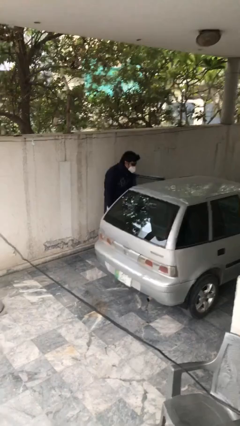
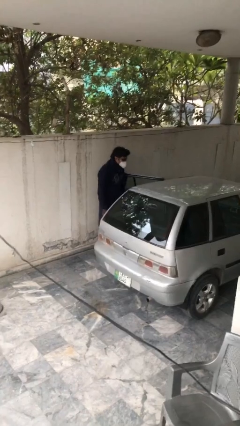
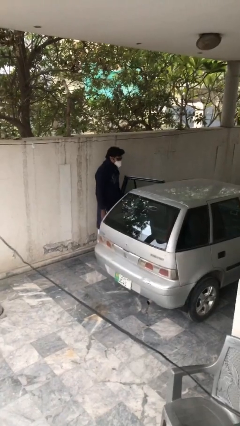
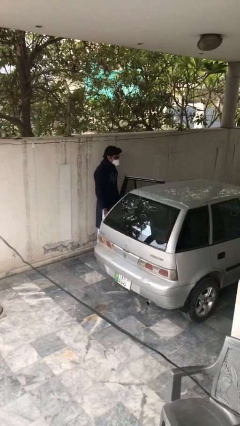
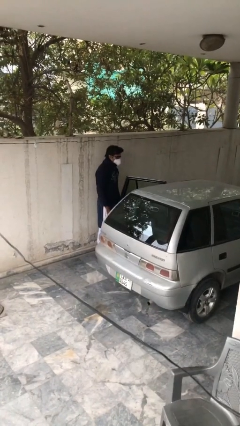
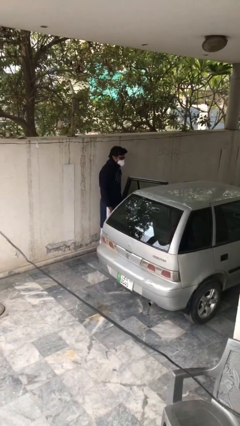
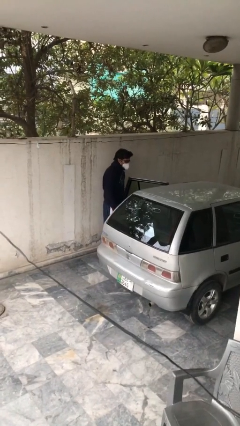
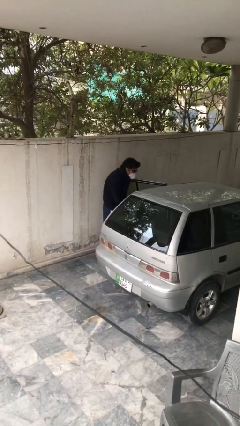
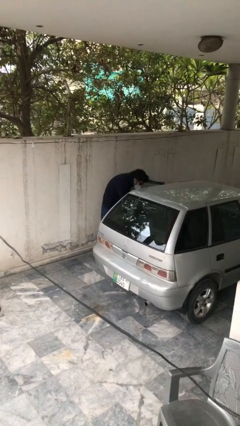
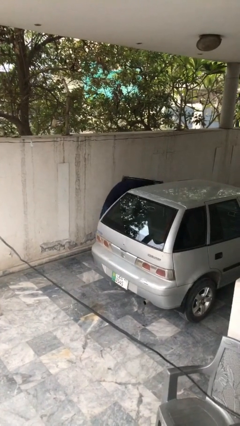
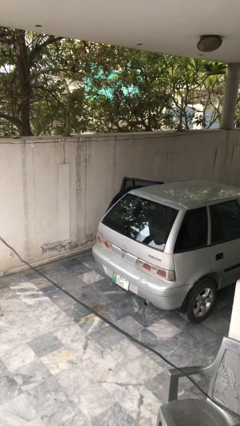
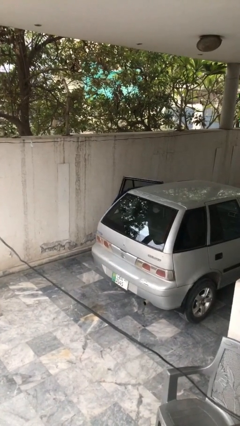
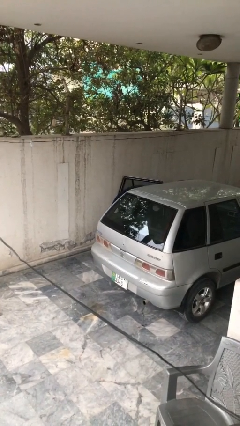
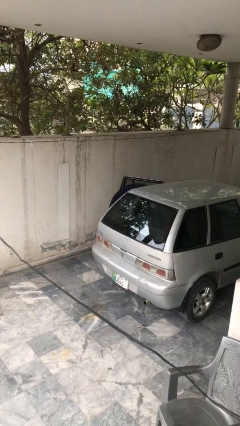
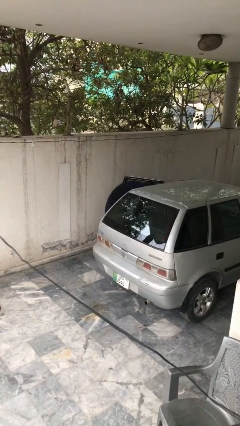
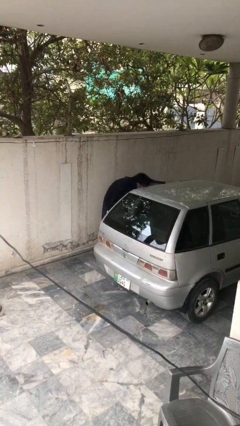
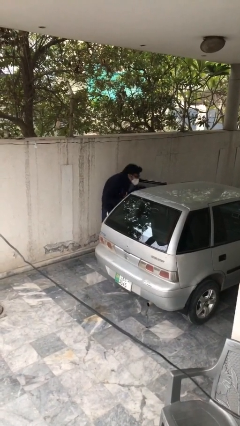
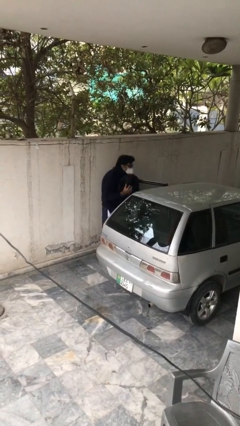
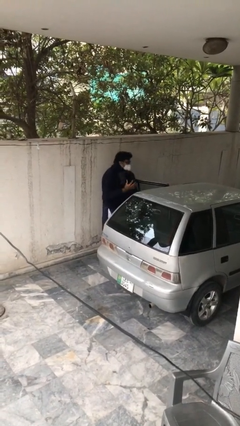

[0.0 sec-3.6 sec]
person unloads car

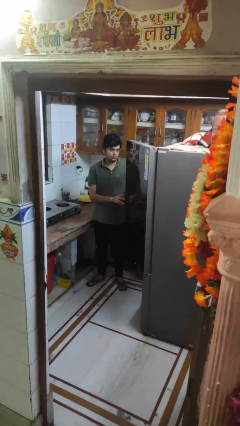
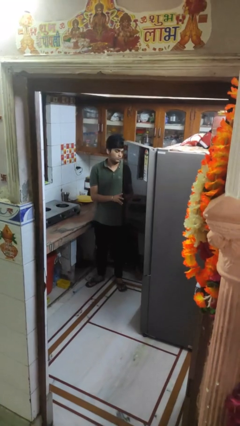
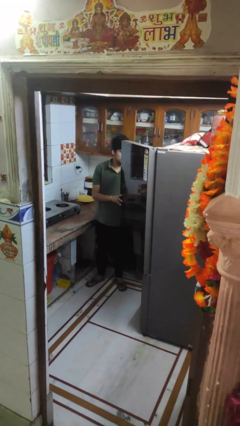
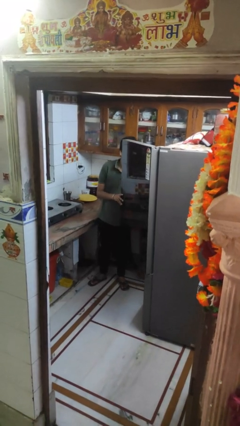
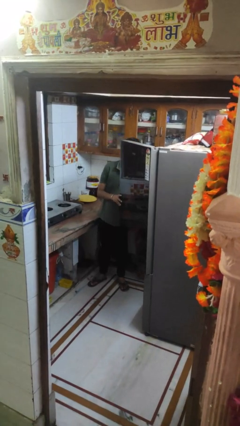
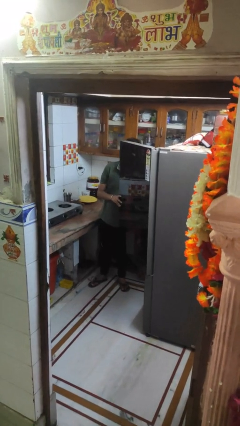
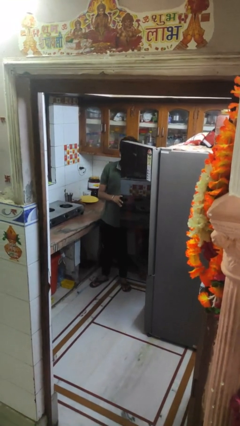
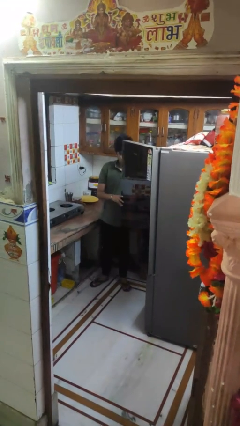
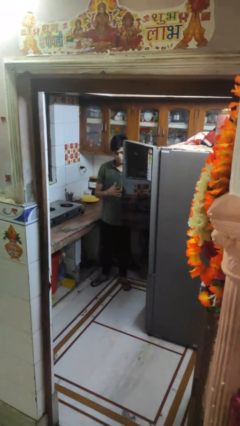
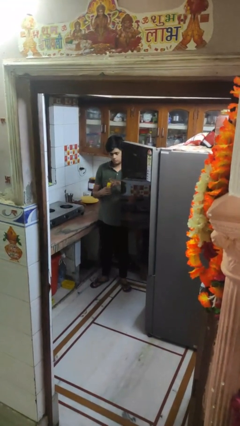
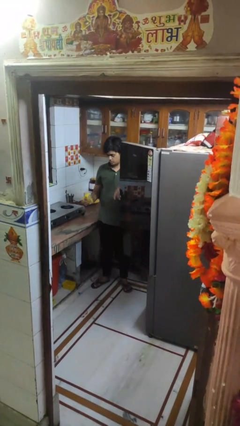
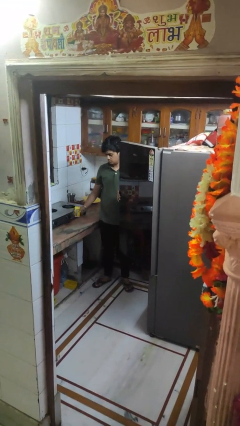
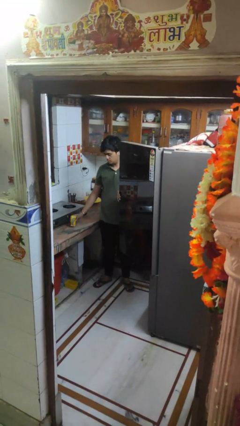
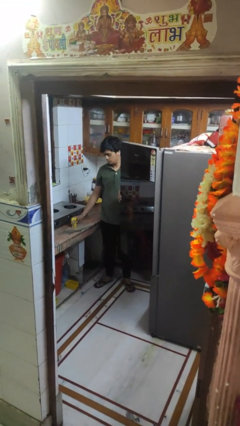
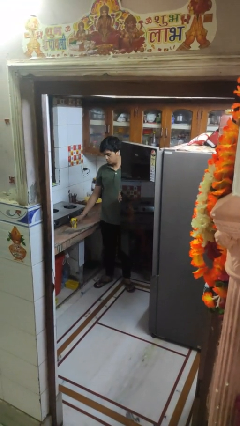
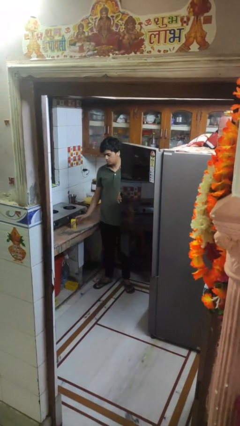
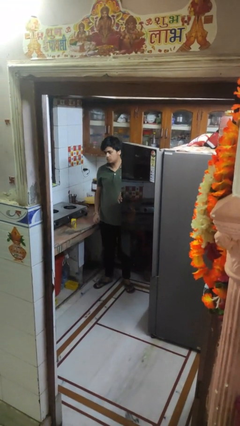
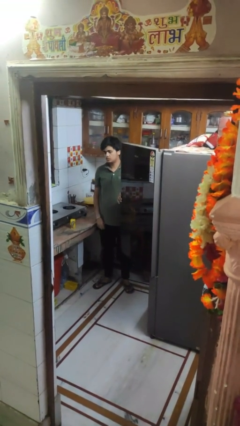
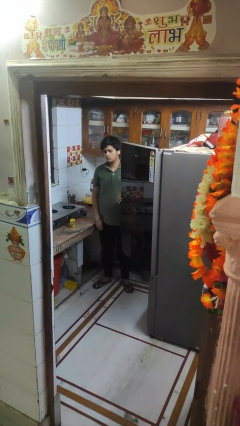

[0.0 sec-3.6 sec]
person takes object from refrigerator

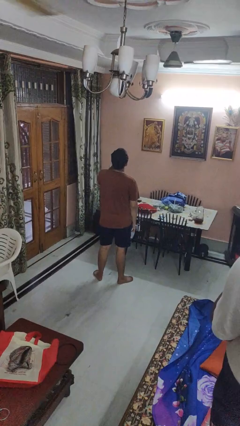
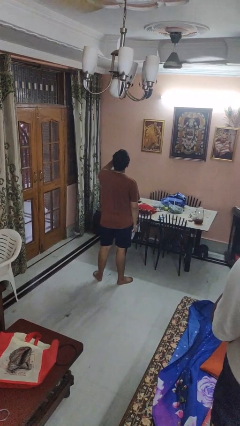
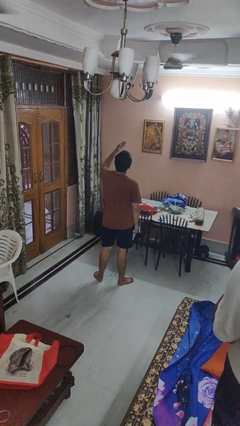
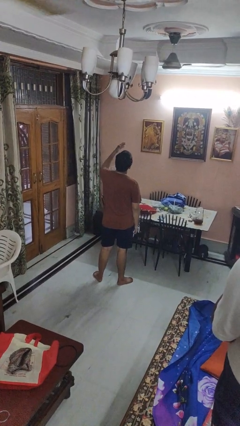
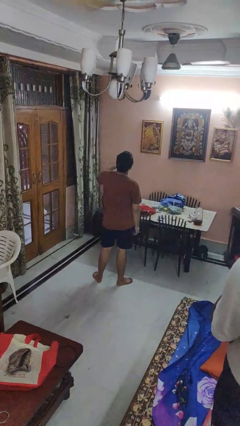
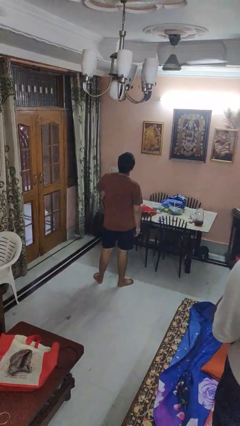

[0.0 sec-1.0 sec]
person gestures blow kiss

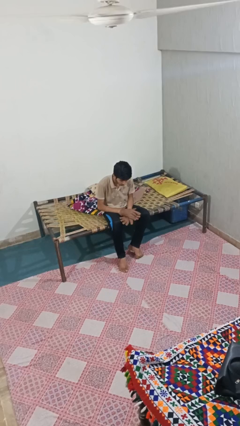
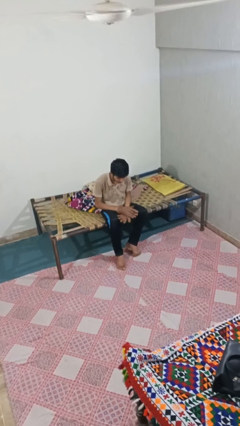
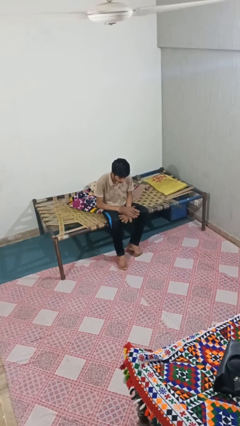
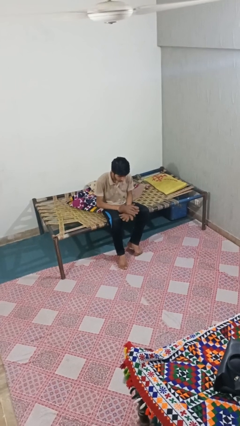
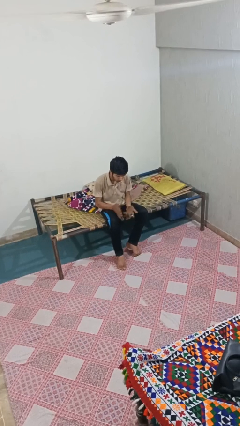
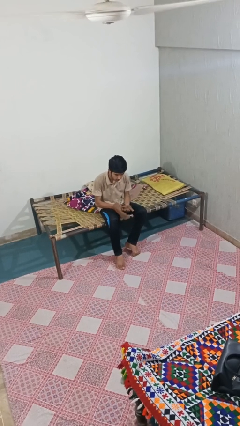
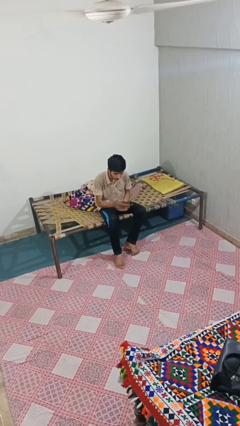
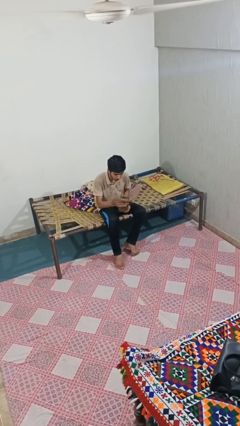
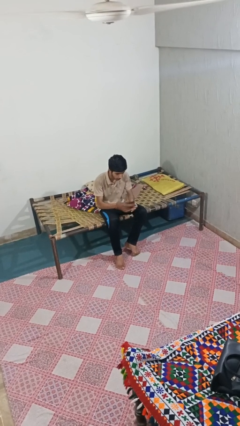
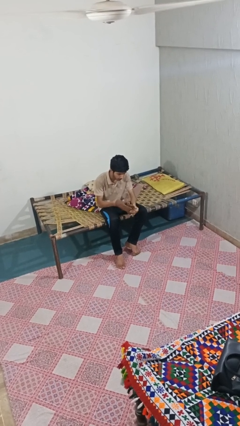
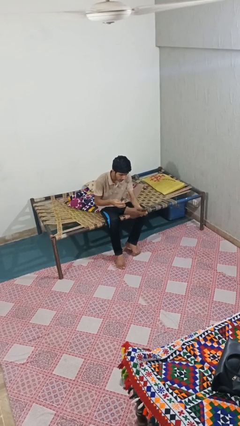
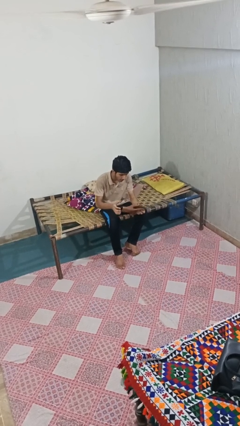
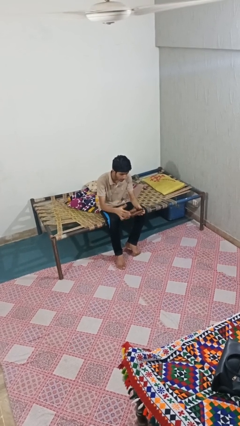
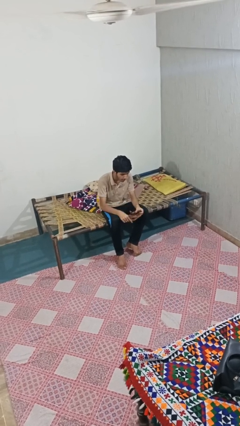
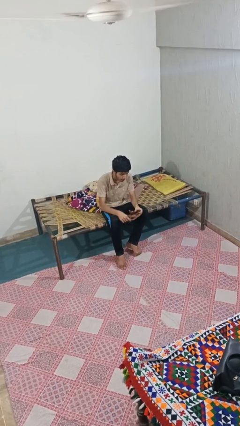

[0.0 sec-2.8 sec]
person takes off gloves

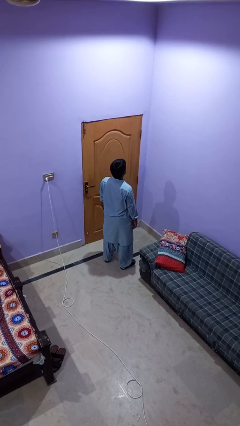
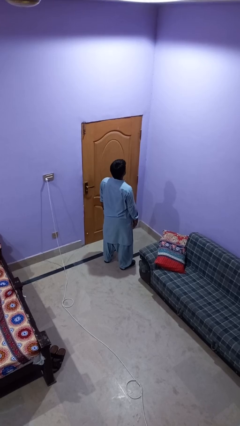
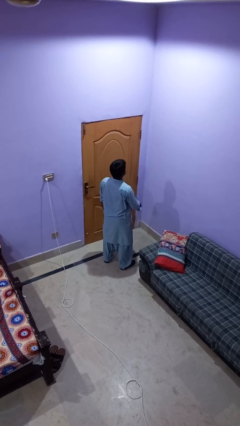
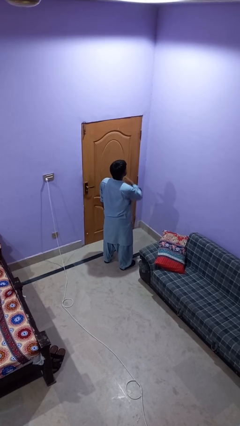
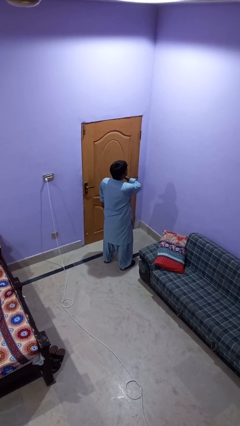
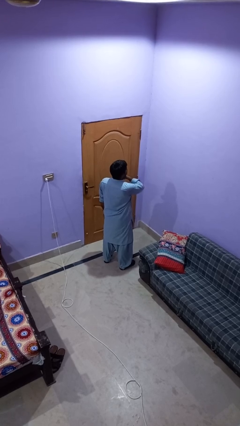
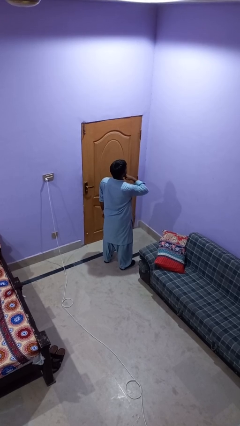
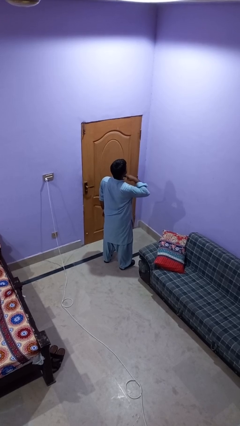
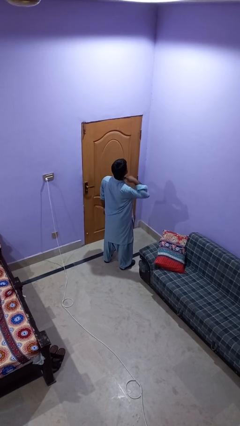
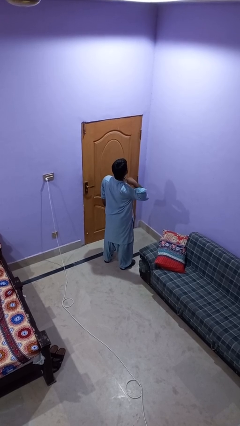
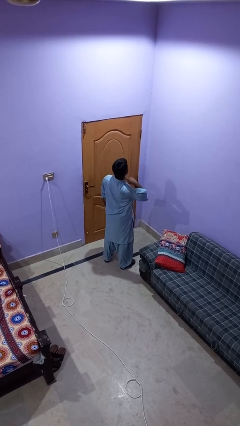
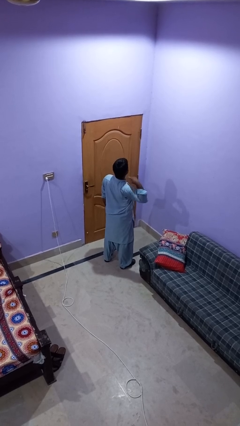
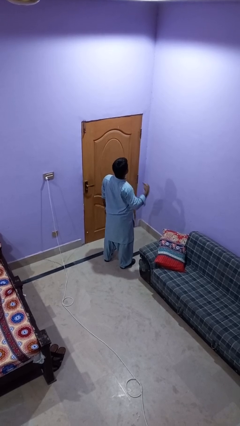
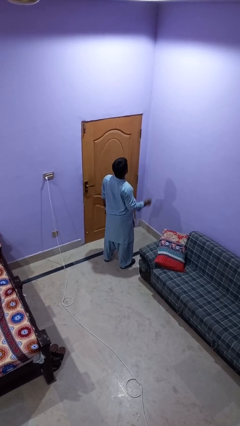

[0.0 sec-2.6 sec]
person gestures cut

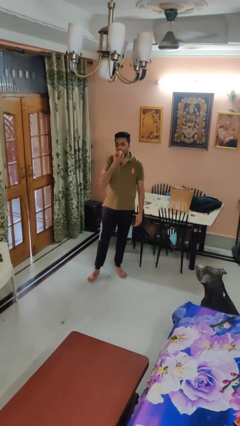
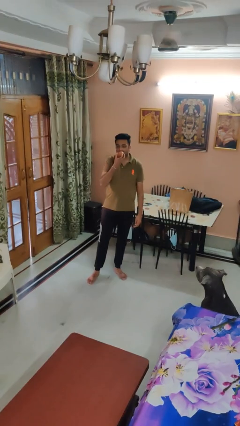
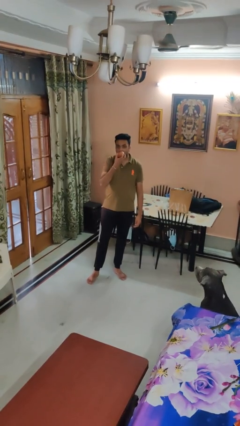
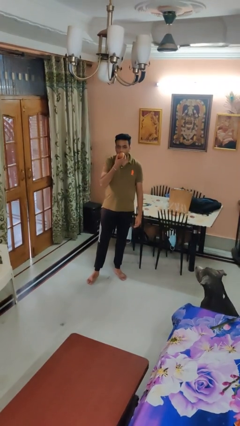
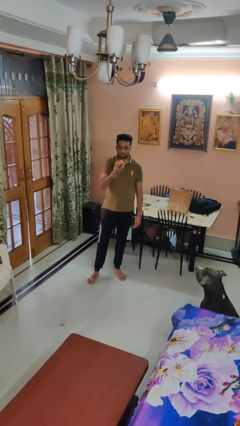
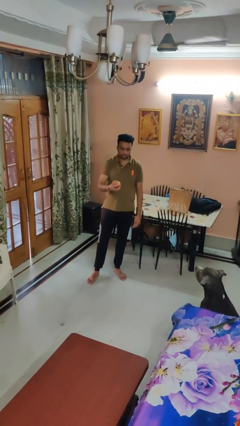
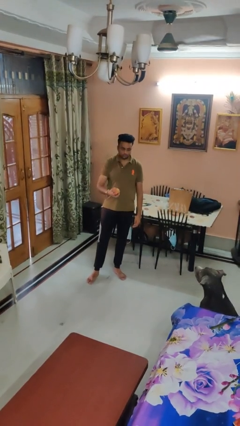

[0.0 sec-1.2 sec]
person eats apple

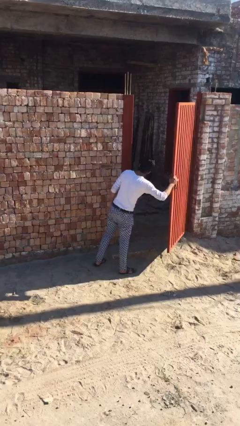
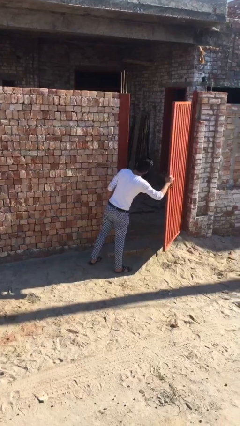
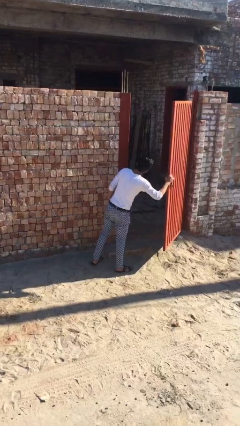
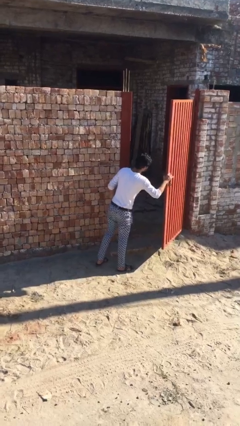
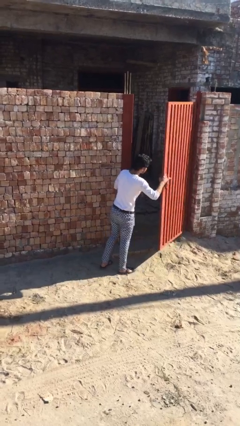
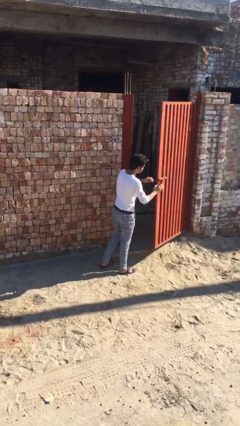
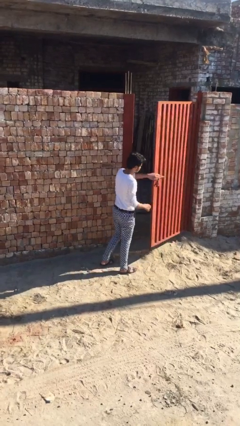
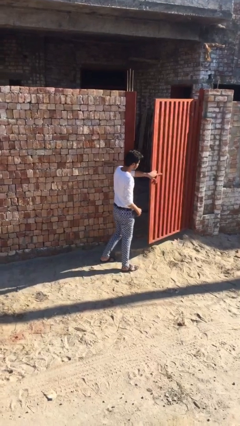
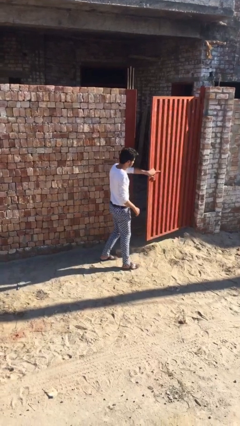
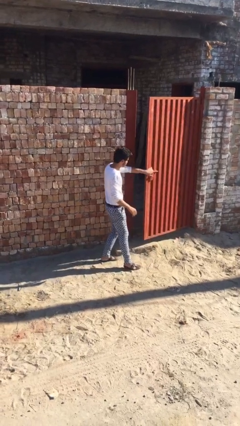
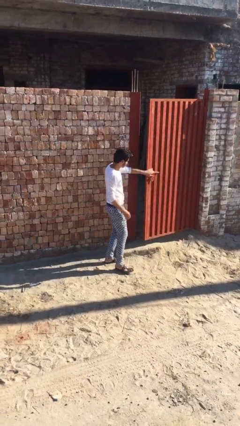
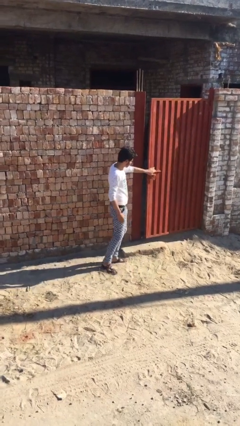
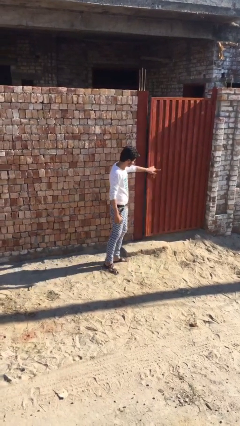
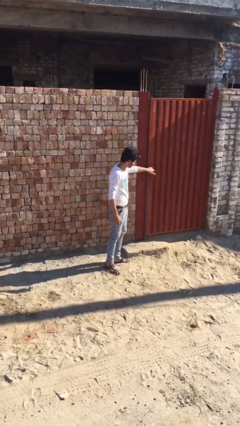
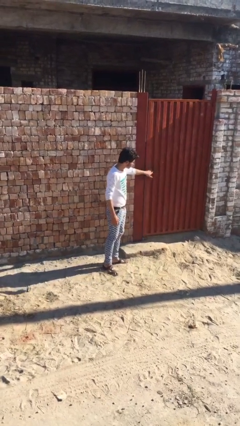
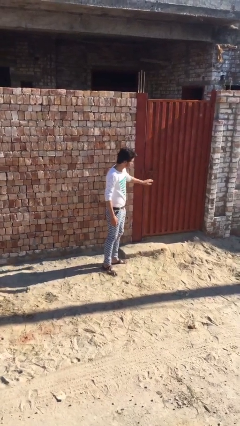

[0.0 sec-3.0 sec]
person closes facility door
